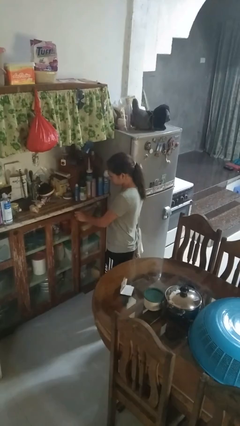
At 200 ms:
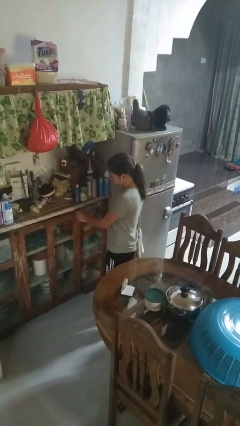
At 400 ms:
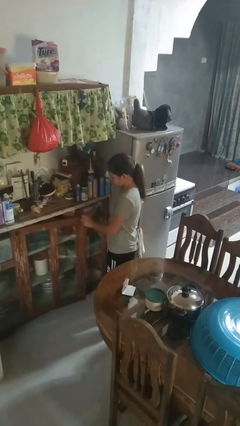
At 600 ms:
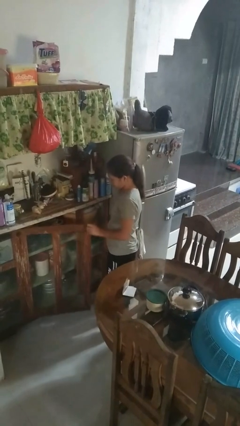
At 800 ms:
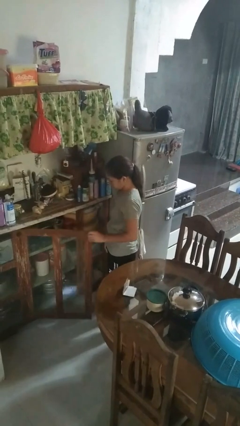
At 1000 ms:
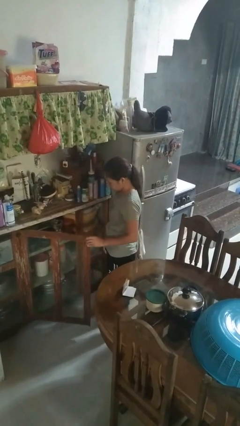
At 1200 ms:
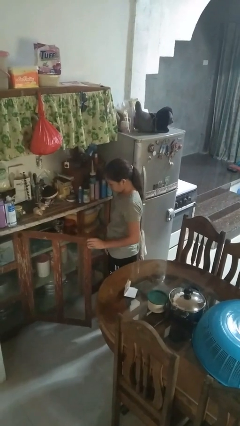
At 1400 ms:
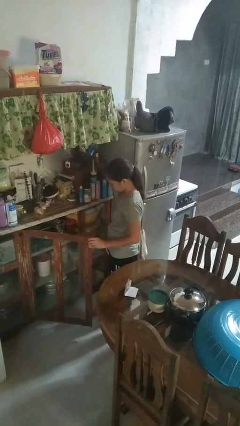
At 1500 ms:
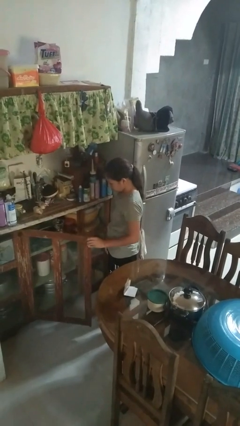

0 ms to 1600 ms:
person opens cabinet

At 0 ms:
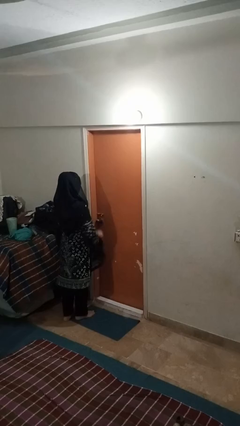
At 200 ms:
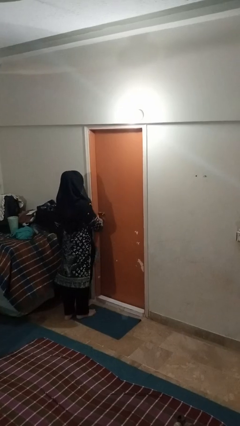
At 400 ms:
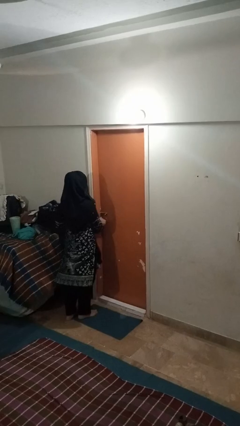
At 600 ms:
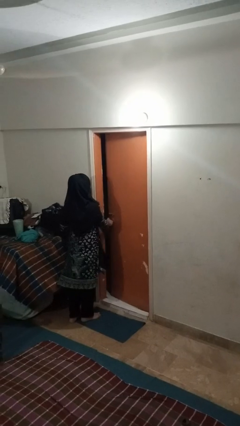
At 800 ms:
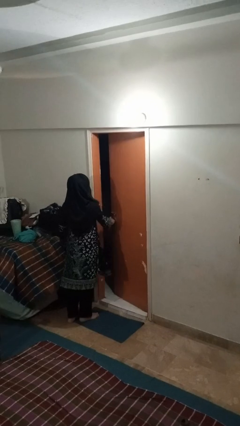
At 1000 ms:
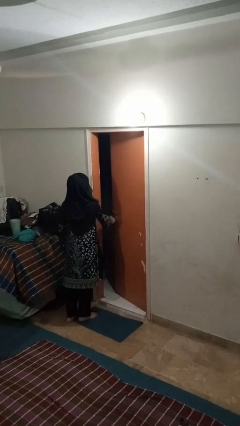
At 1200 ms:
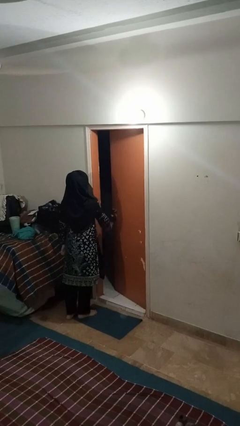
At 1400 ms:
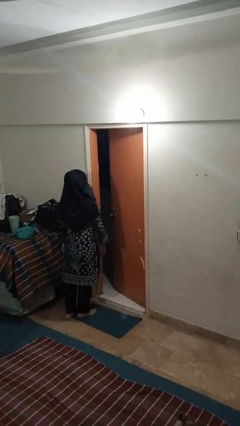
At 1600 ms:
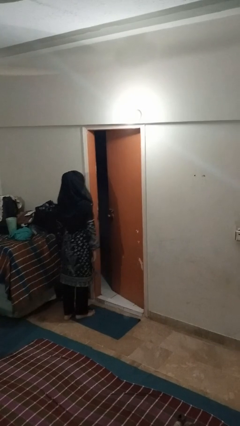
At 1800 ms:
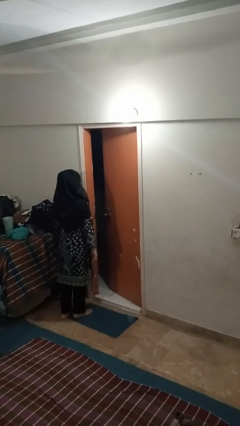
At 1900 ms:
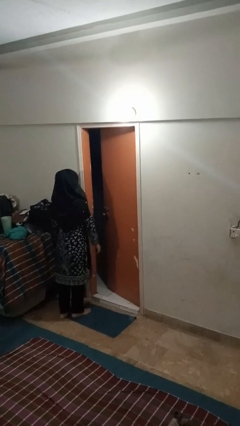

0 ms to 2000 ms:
person opens facility door

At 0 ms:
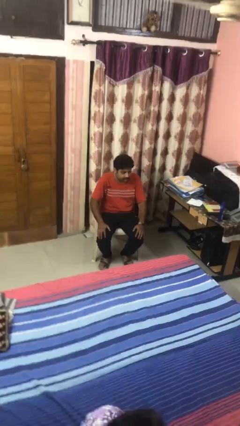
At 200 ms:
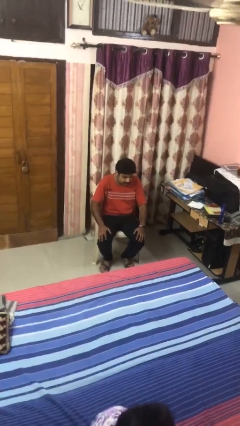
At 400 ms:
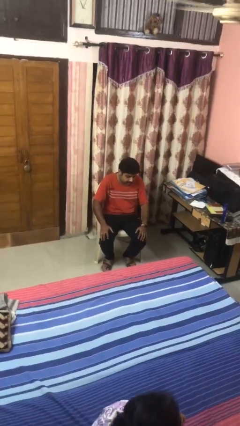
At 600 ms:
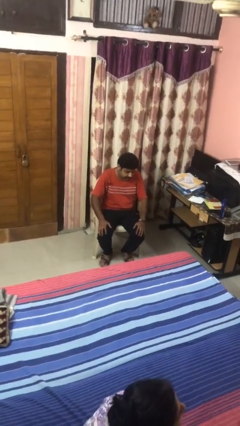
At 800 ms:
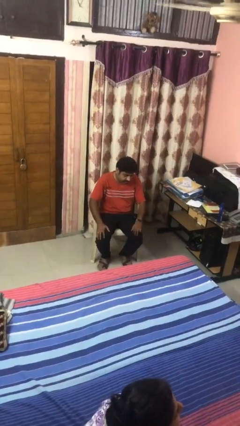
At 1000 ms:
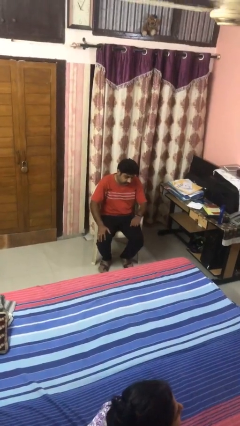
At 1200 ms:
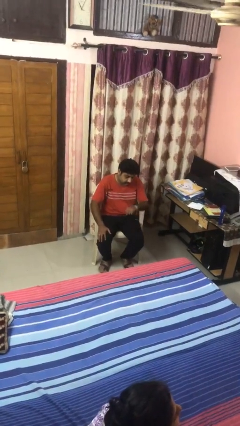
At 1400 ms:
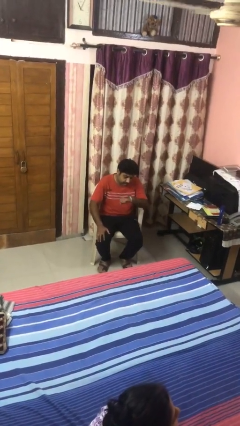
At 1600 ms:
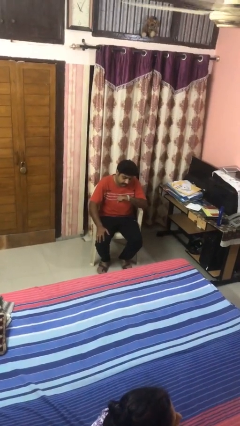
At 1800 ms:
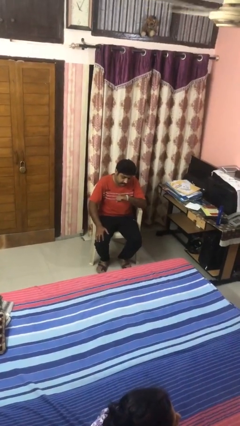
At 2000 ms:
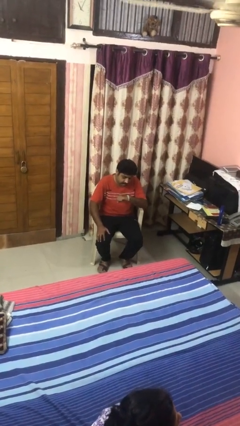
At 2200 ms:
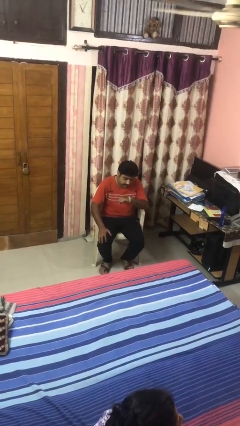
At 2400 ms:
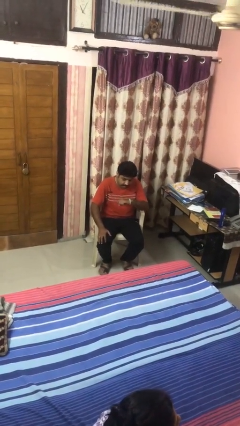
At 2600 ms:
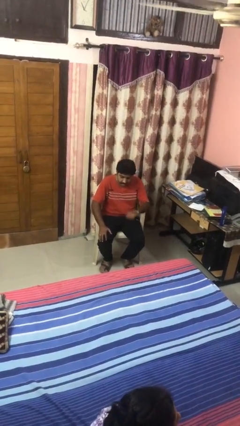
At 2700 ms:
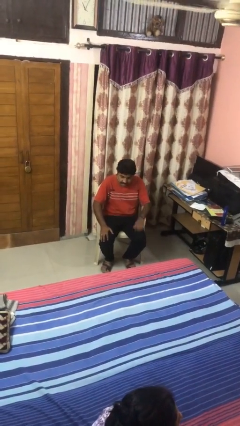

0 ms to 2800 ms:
person looks at wristwatch

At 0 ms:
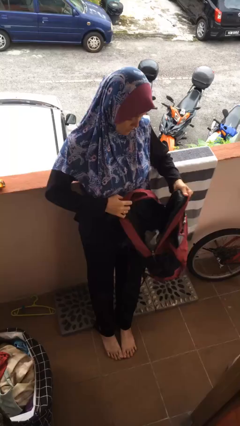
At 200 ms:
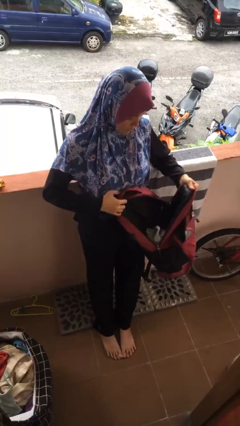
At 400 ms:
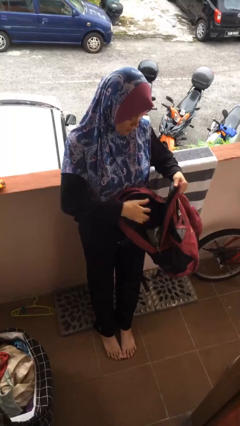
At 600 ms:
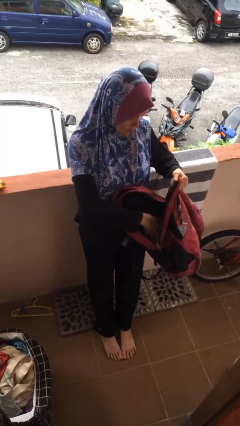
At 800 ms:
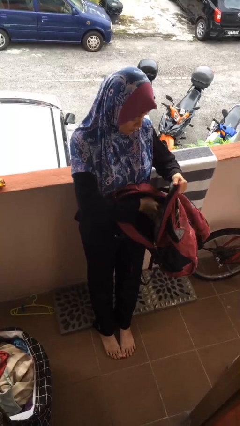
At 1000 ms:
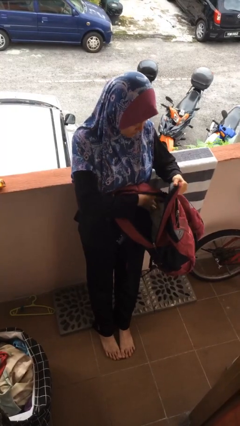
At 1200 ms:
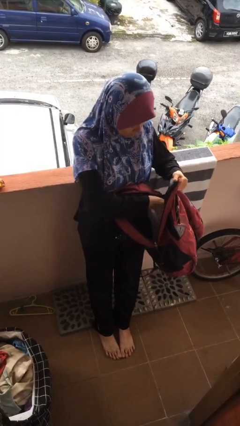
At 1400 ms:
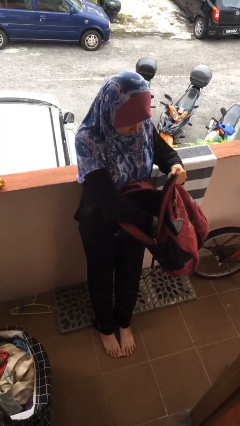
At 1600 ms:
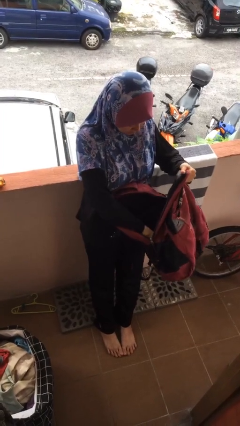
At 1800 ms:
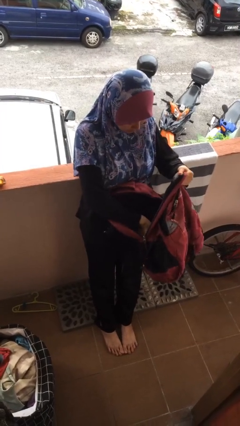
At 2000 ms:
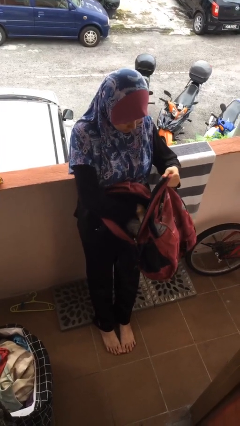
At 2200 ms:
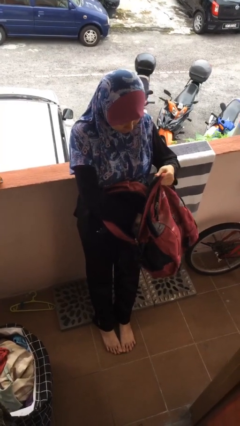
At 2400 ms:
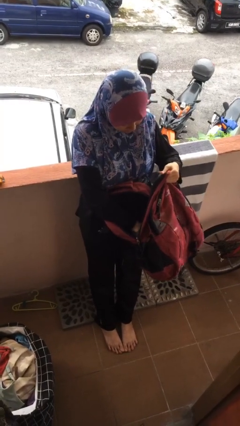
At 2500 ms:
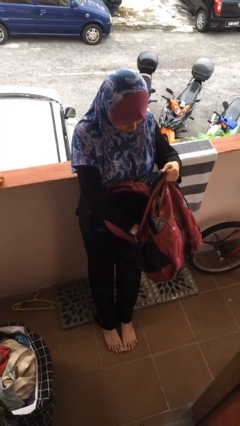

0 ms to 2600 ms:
person searches in backpack

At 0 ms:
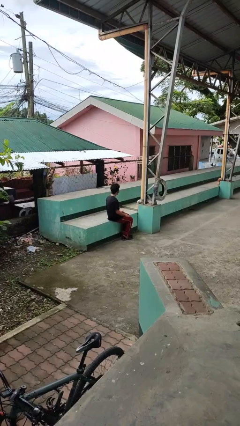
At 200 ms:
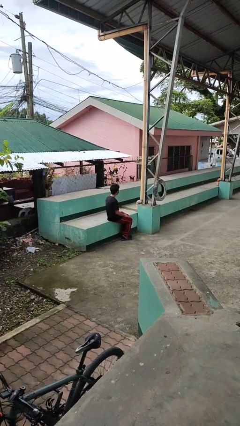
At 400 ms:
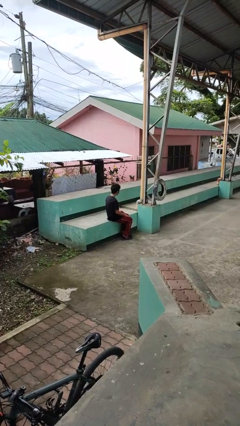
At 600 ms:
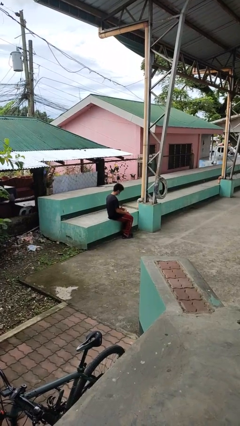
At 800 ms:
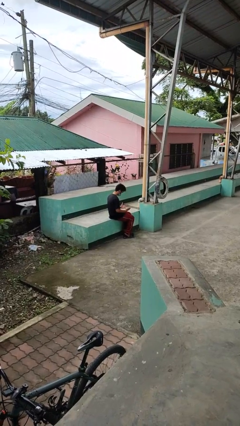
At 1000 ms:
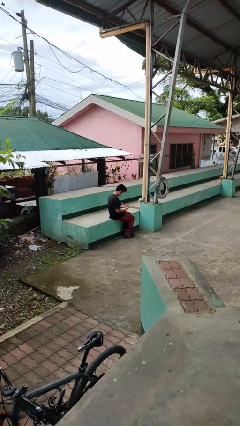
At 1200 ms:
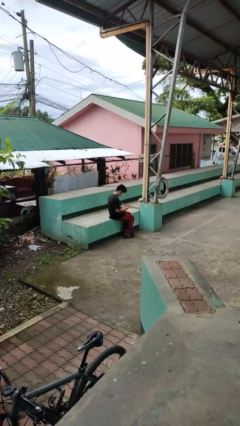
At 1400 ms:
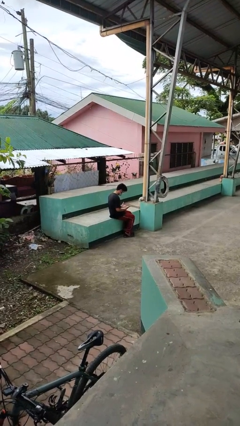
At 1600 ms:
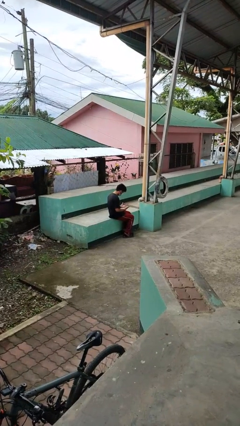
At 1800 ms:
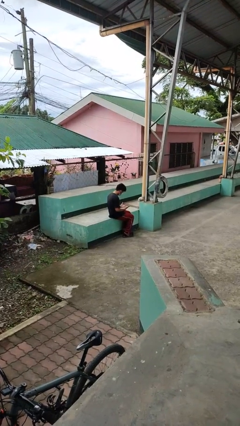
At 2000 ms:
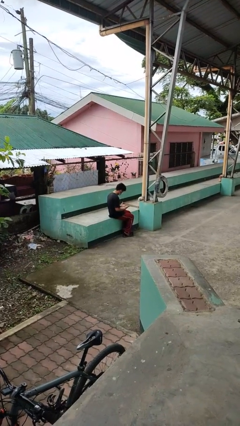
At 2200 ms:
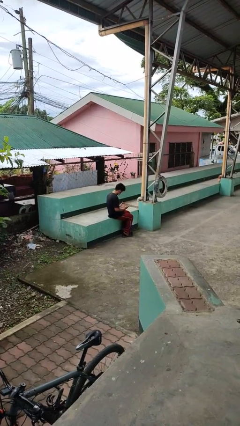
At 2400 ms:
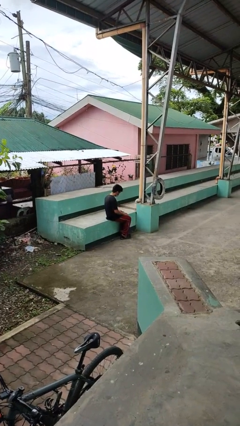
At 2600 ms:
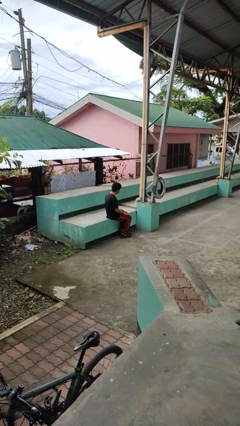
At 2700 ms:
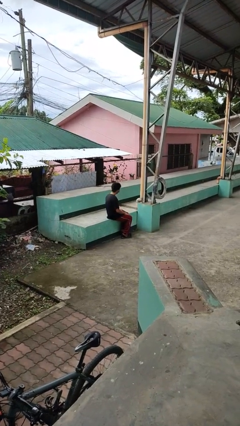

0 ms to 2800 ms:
person looks at hands in lap

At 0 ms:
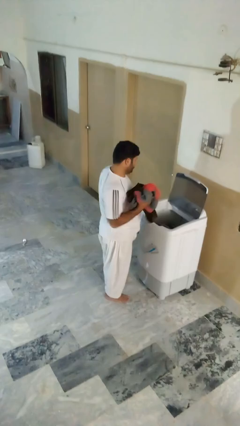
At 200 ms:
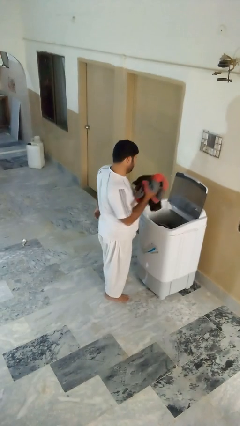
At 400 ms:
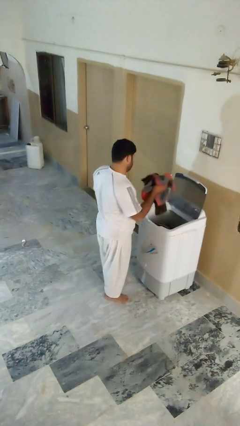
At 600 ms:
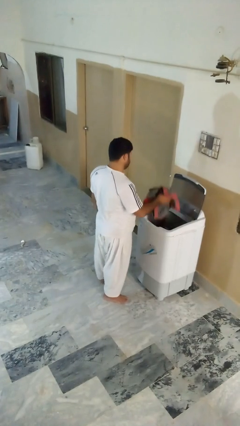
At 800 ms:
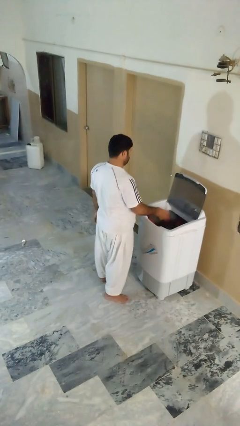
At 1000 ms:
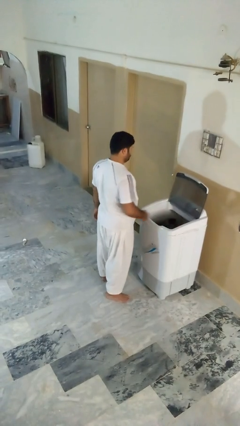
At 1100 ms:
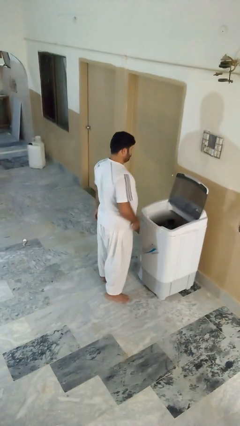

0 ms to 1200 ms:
person loads clotheswasher

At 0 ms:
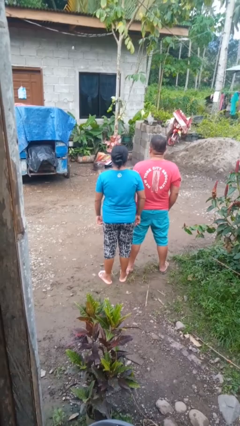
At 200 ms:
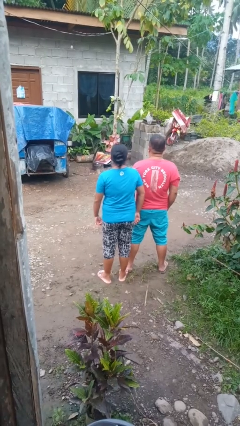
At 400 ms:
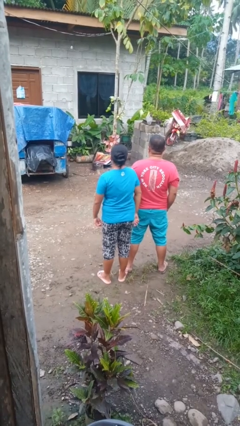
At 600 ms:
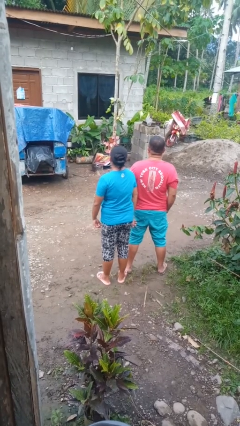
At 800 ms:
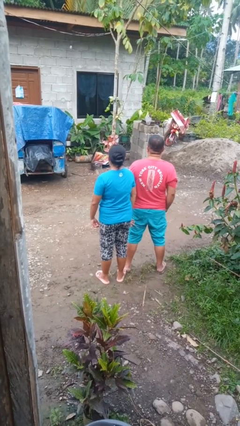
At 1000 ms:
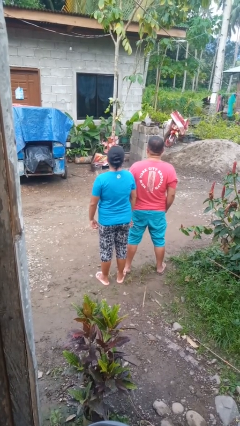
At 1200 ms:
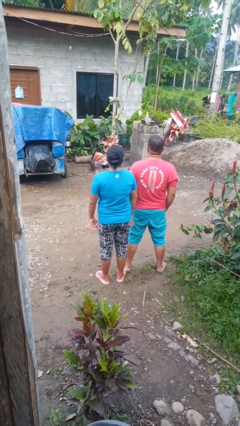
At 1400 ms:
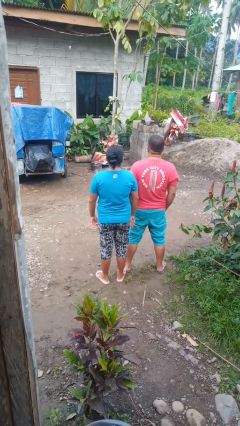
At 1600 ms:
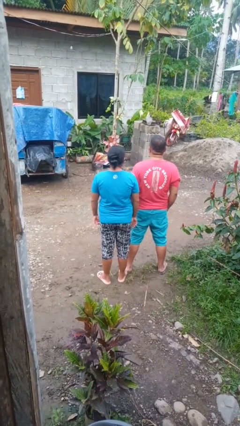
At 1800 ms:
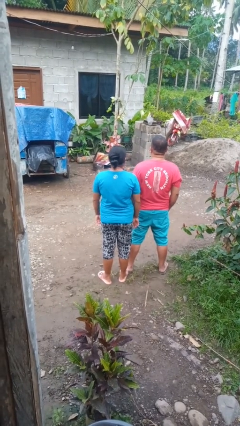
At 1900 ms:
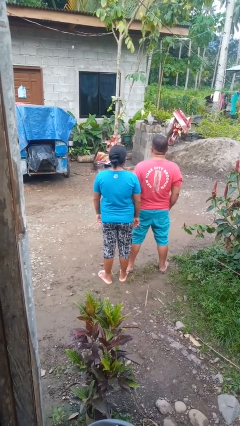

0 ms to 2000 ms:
person nudges person with elbow

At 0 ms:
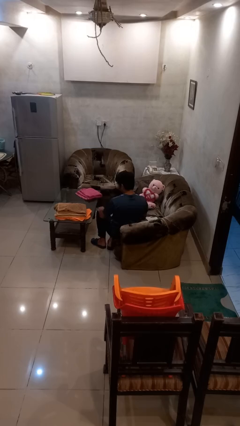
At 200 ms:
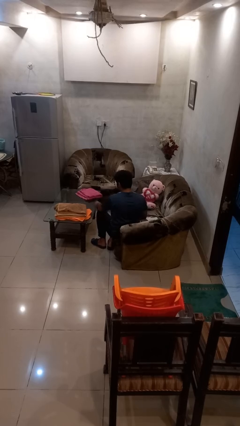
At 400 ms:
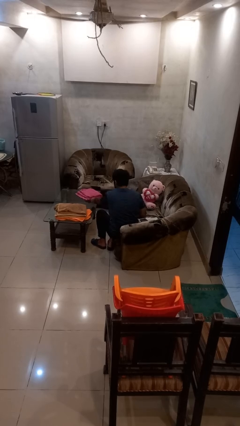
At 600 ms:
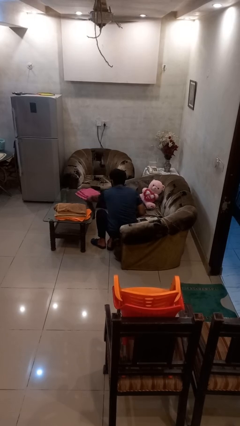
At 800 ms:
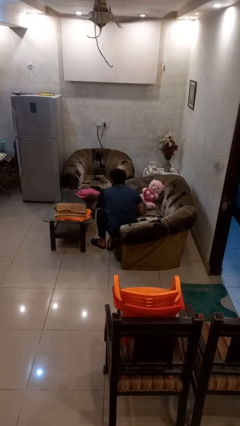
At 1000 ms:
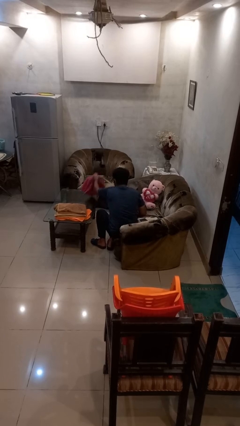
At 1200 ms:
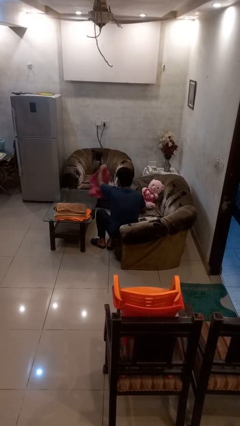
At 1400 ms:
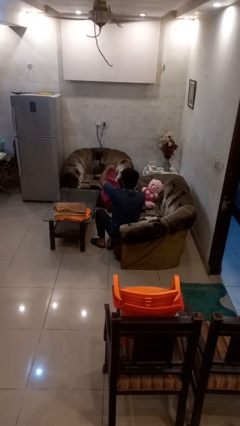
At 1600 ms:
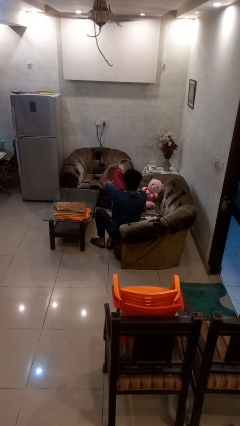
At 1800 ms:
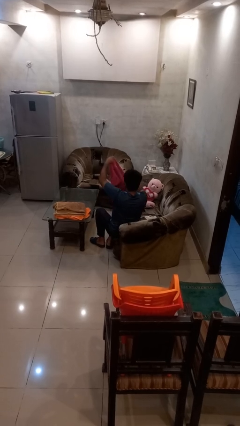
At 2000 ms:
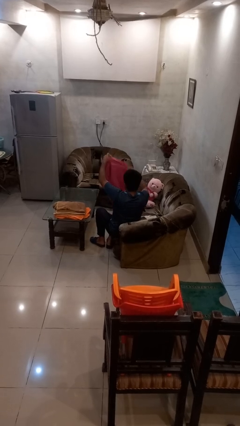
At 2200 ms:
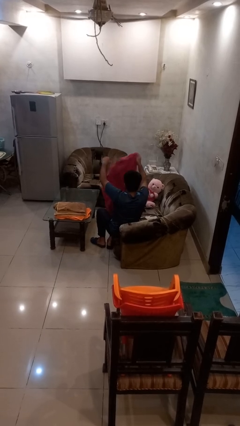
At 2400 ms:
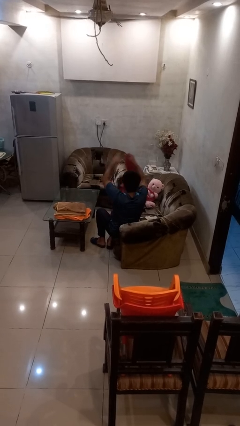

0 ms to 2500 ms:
person folds towel
